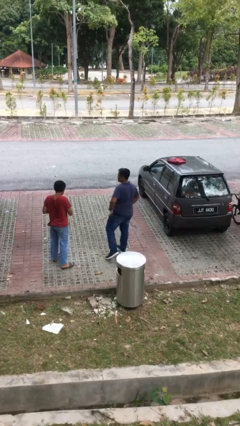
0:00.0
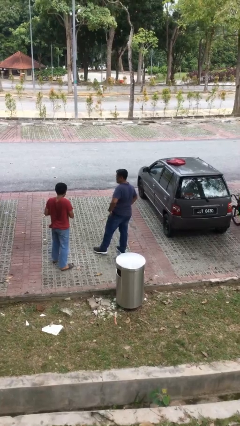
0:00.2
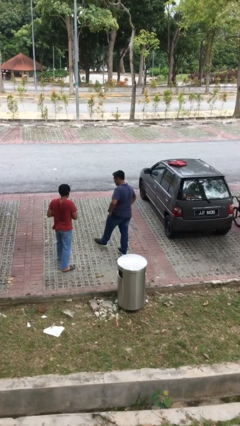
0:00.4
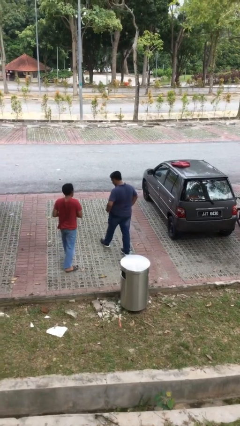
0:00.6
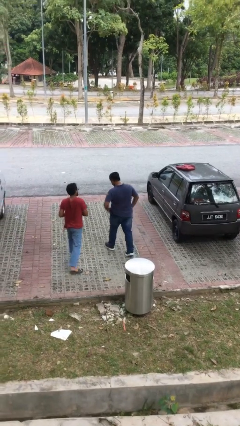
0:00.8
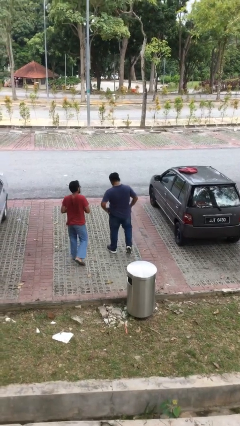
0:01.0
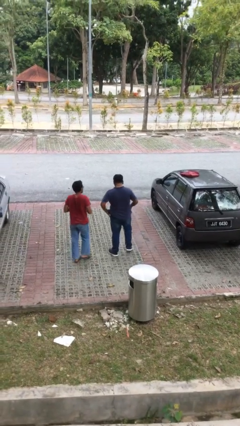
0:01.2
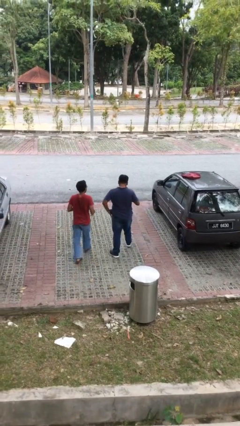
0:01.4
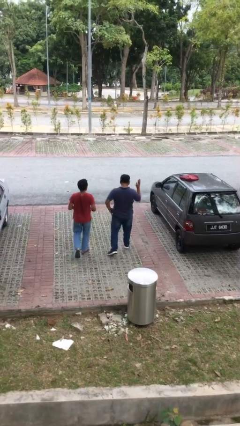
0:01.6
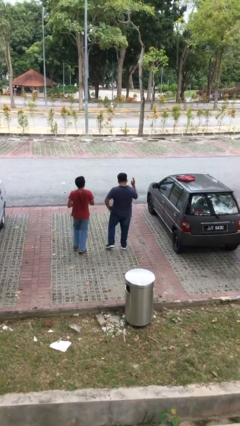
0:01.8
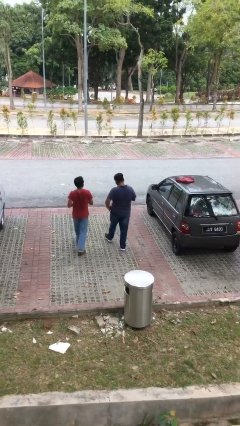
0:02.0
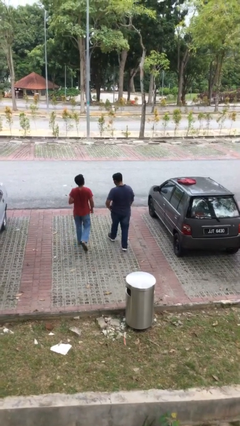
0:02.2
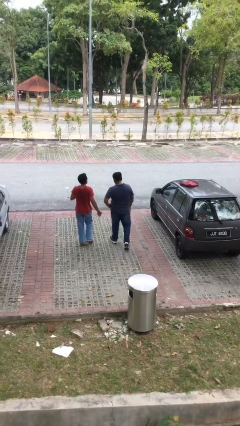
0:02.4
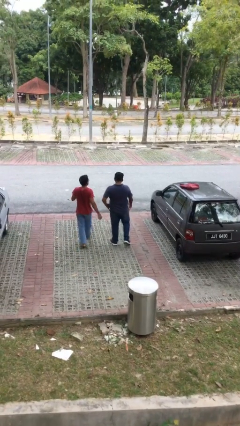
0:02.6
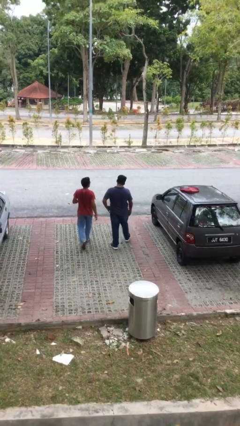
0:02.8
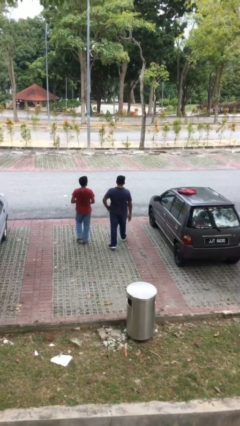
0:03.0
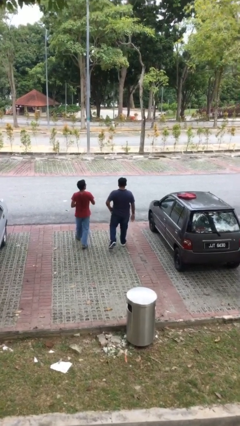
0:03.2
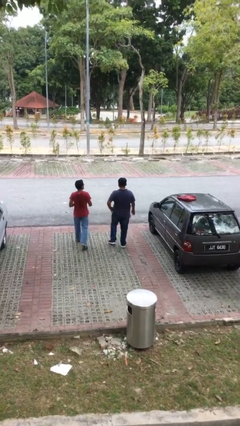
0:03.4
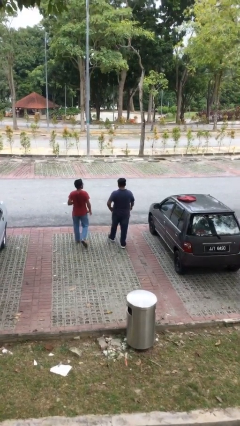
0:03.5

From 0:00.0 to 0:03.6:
person talks to person

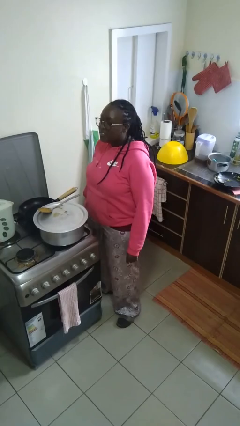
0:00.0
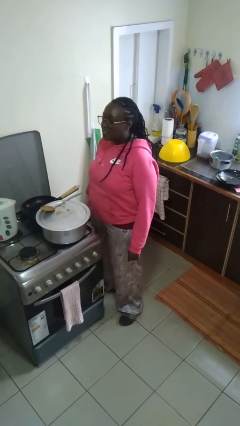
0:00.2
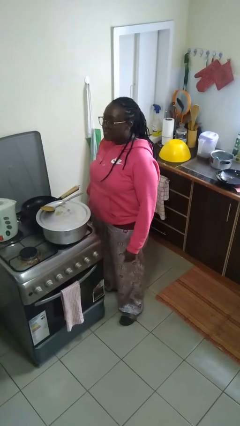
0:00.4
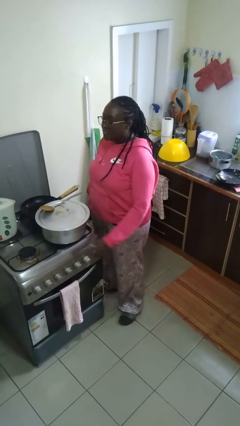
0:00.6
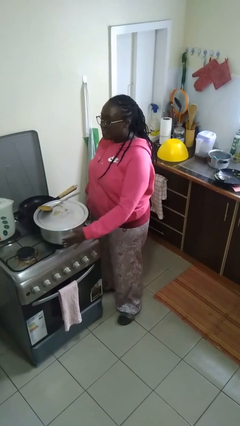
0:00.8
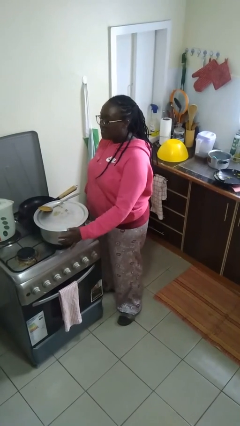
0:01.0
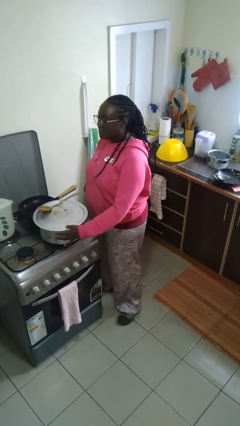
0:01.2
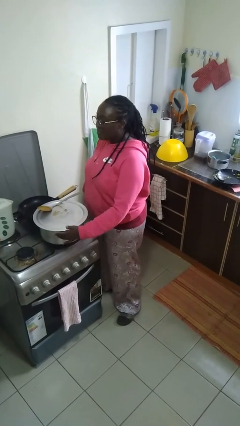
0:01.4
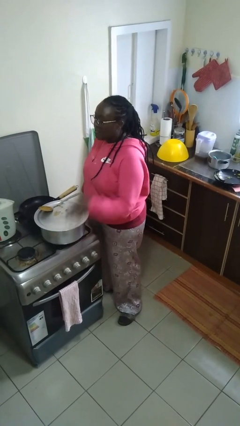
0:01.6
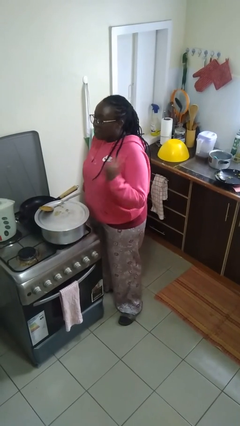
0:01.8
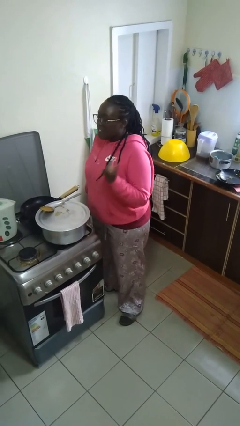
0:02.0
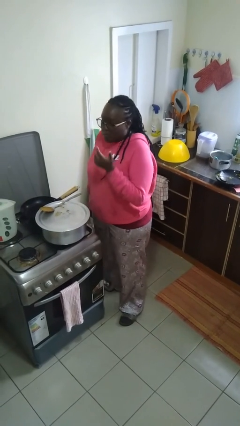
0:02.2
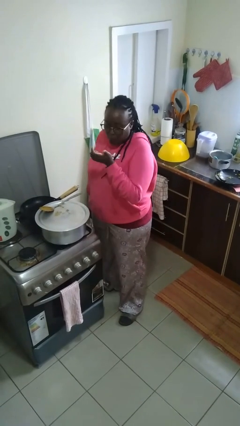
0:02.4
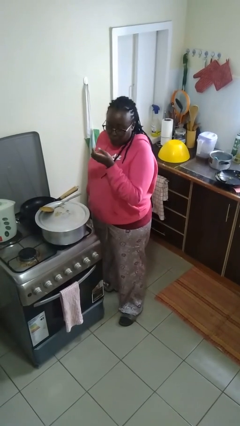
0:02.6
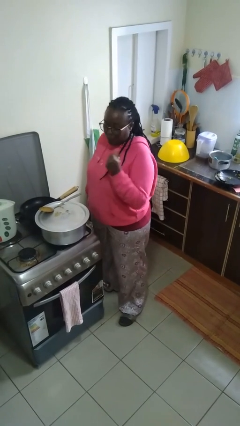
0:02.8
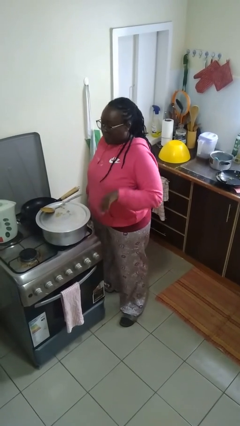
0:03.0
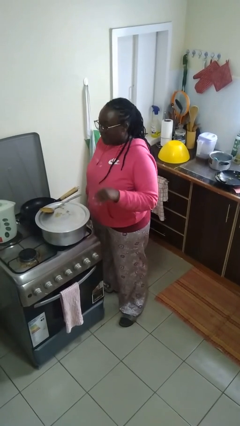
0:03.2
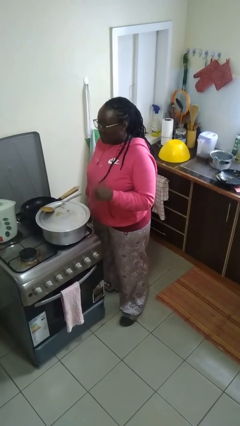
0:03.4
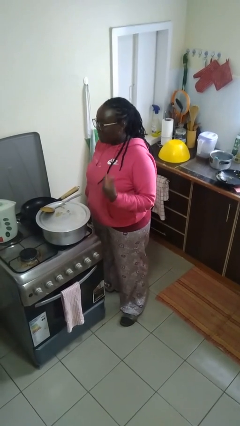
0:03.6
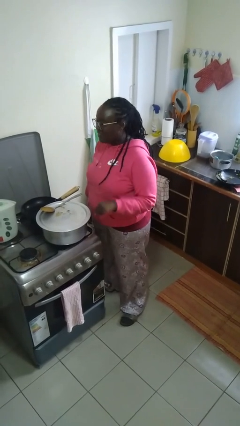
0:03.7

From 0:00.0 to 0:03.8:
person burns hand

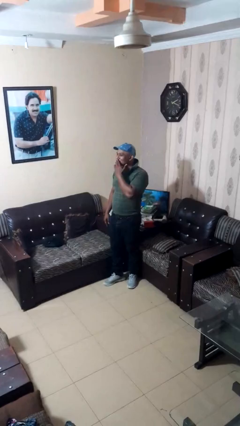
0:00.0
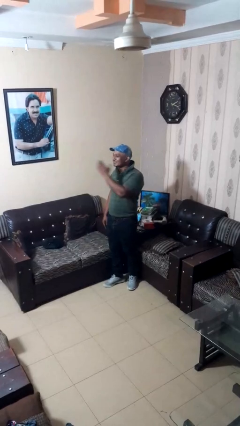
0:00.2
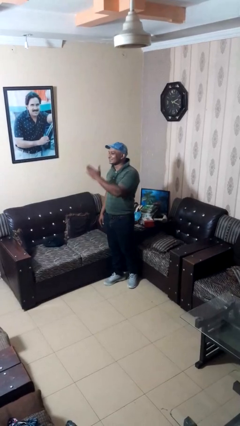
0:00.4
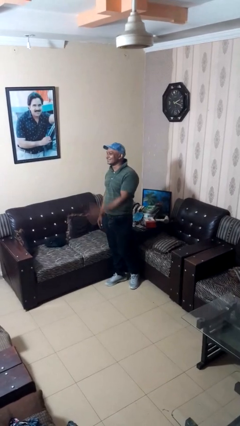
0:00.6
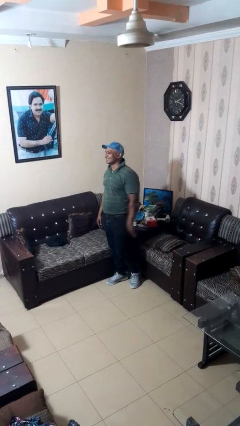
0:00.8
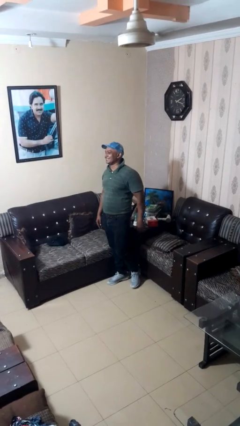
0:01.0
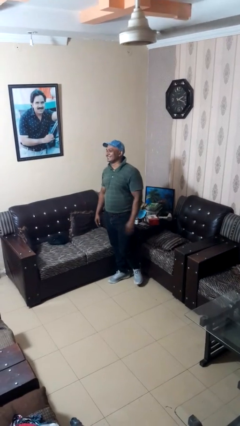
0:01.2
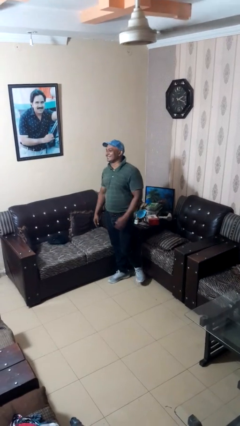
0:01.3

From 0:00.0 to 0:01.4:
person gestures blow kiss

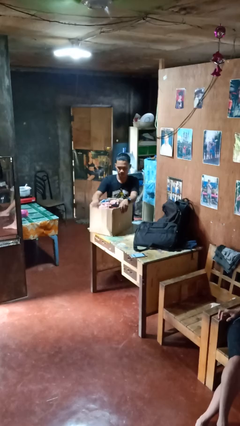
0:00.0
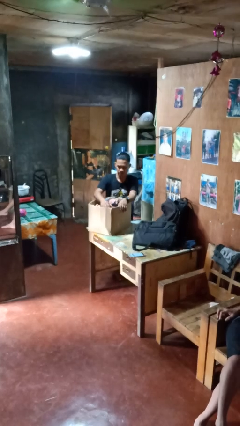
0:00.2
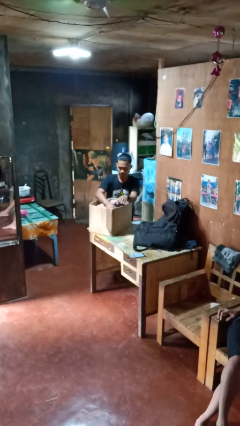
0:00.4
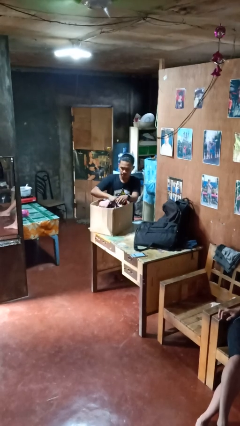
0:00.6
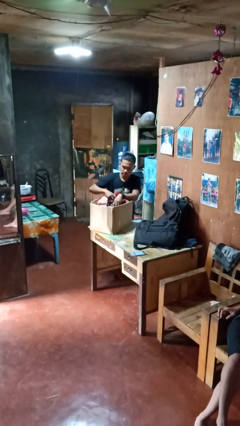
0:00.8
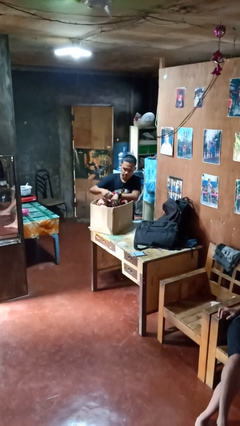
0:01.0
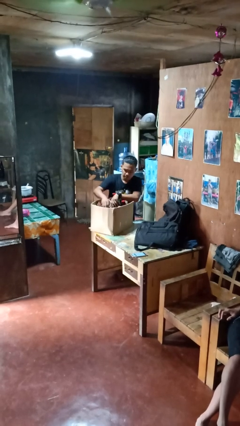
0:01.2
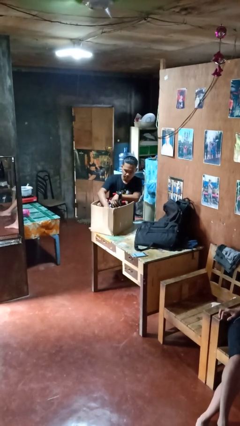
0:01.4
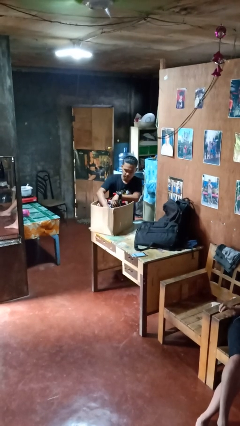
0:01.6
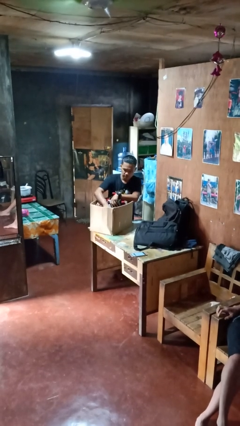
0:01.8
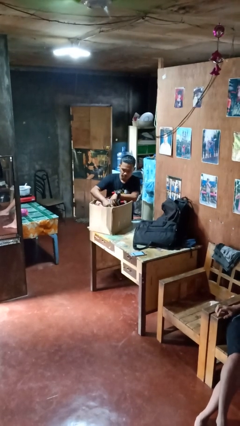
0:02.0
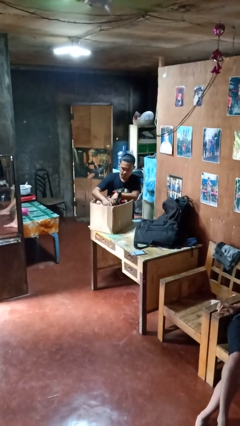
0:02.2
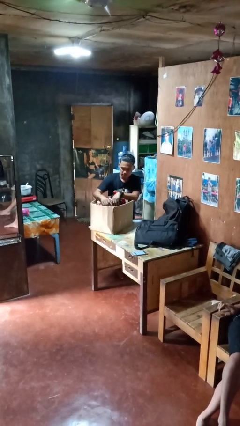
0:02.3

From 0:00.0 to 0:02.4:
person searches in box

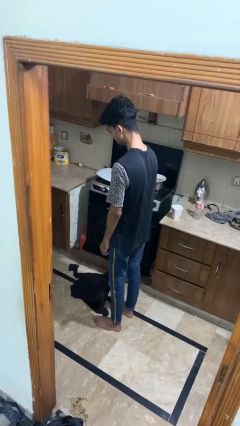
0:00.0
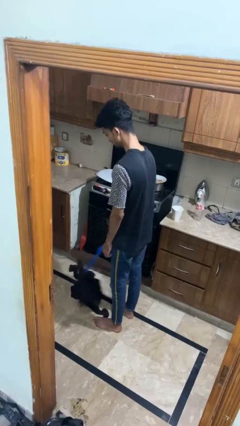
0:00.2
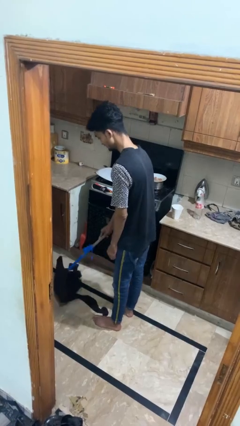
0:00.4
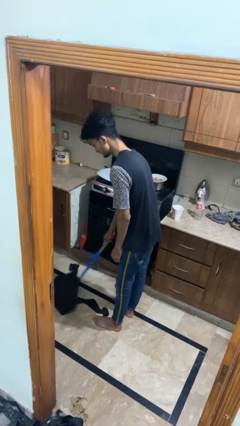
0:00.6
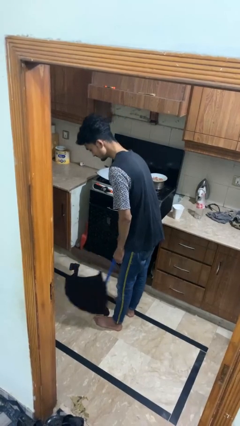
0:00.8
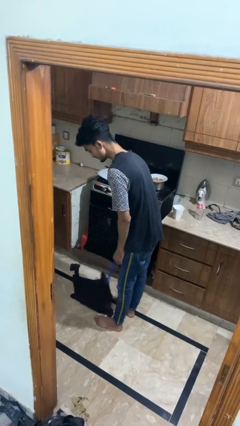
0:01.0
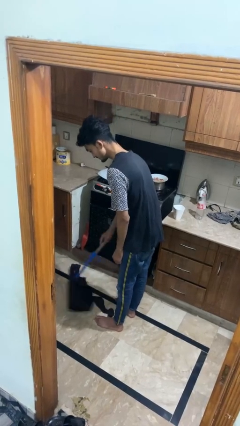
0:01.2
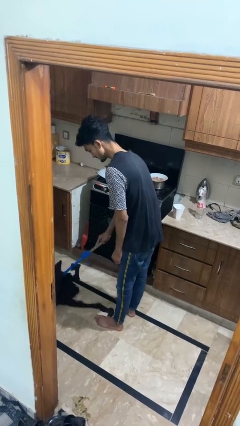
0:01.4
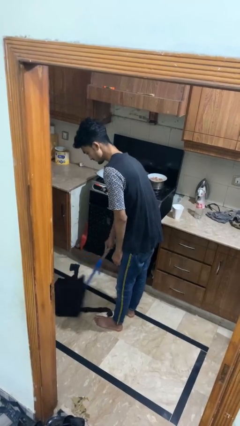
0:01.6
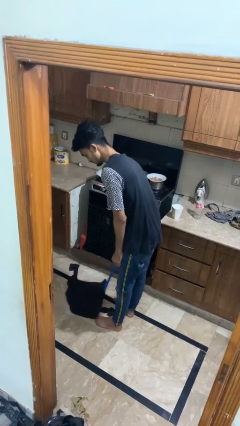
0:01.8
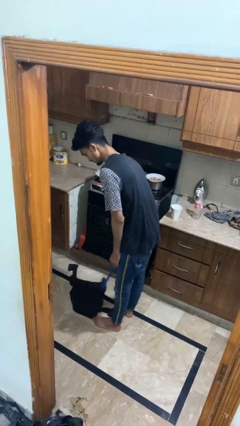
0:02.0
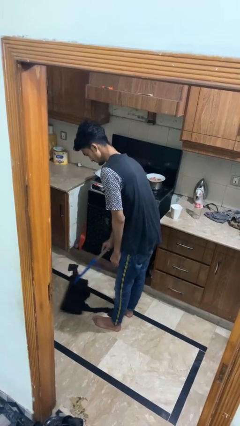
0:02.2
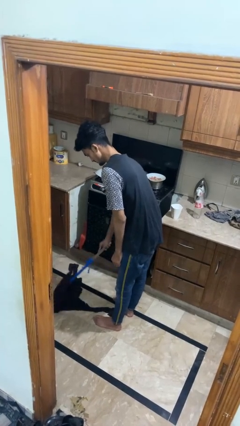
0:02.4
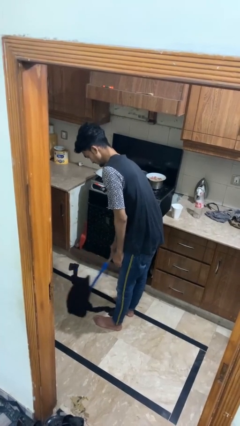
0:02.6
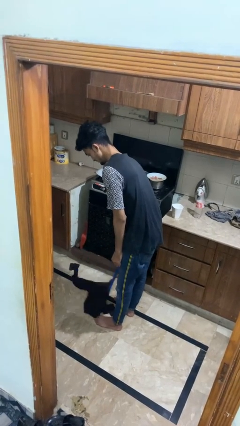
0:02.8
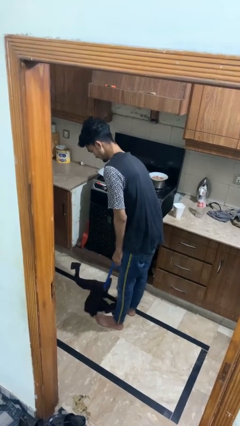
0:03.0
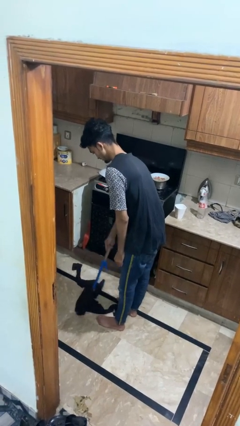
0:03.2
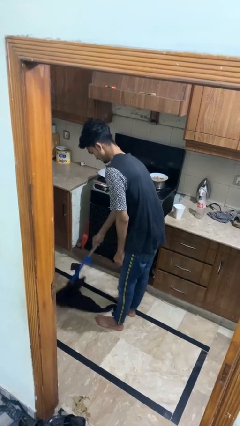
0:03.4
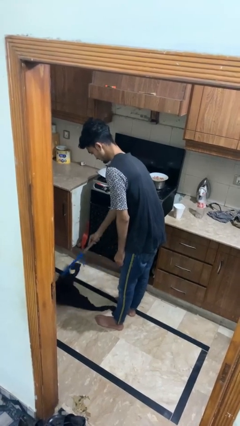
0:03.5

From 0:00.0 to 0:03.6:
person mops

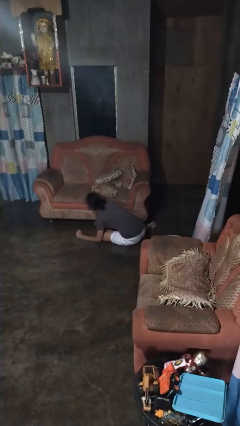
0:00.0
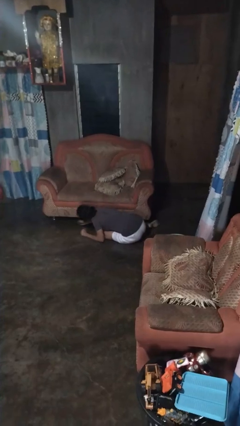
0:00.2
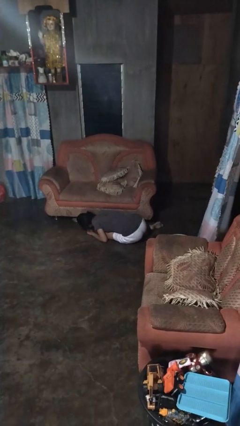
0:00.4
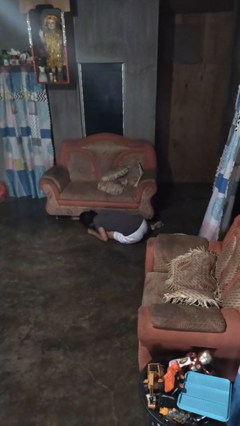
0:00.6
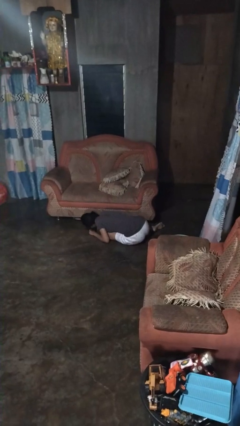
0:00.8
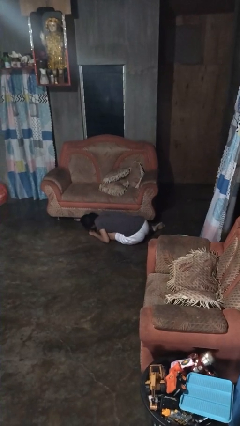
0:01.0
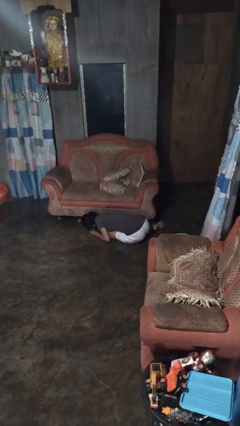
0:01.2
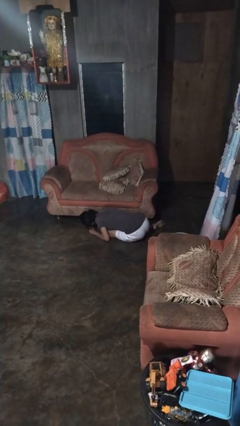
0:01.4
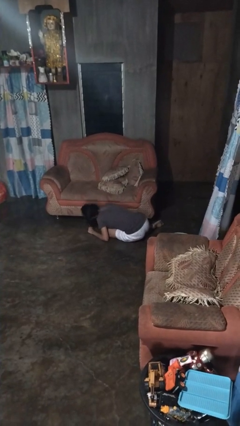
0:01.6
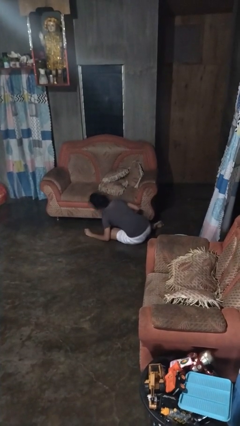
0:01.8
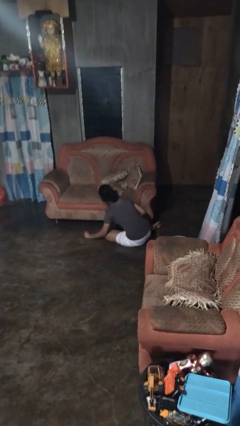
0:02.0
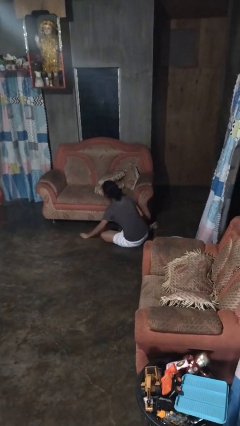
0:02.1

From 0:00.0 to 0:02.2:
person searches under couch

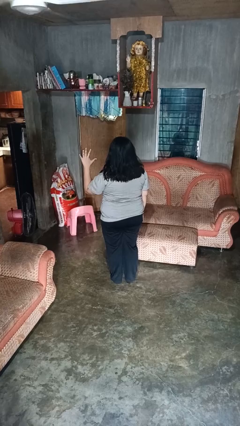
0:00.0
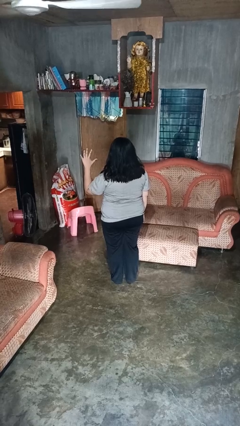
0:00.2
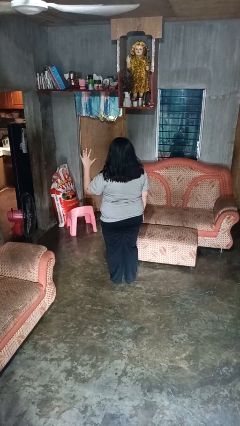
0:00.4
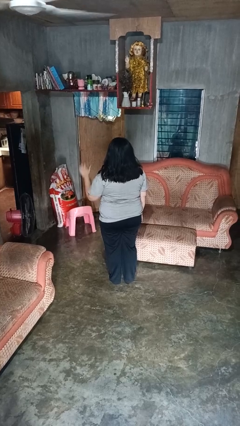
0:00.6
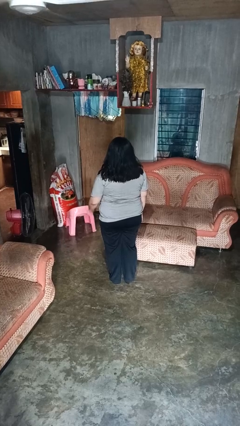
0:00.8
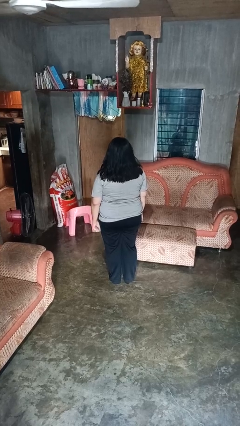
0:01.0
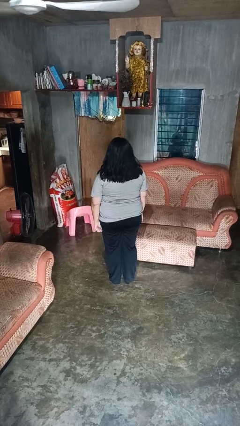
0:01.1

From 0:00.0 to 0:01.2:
person gestures number five
